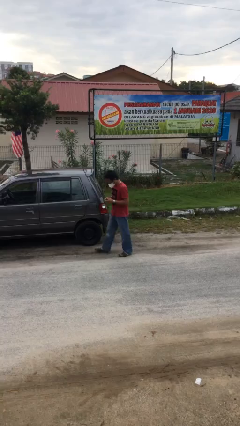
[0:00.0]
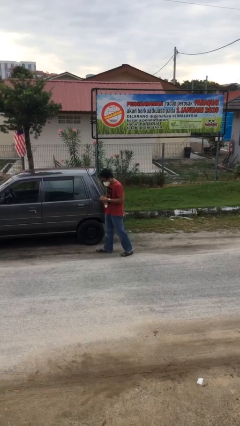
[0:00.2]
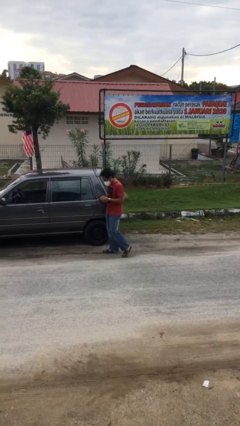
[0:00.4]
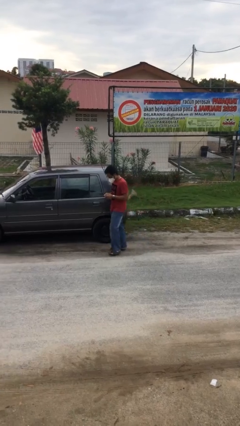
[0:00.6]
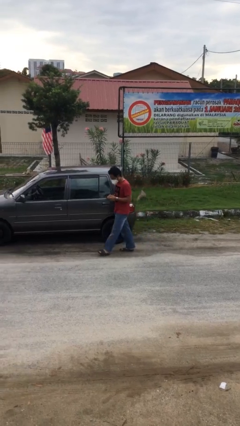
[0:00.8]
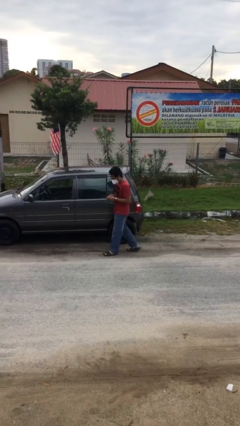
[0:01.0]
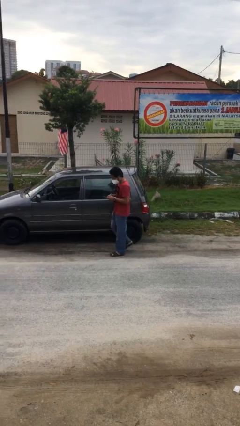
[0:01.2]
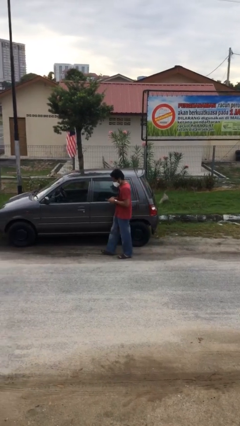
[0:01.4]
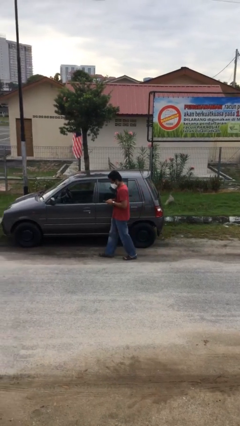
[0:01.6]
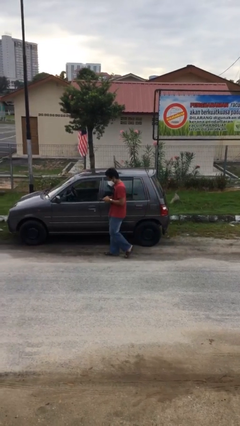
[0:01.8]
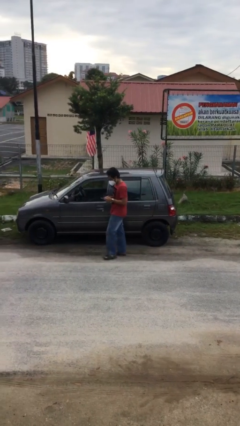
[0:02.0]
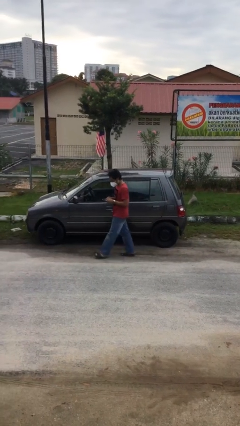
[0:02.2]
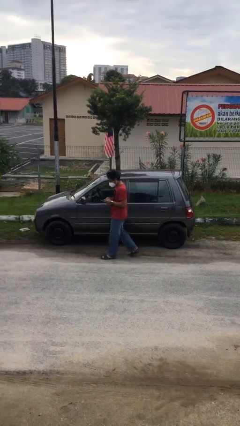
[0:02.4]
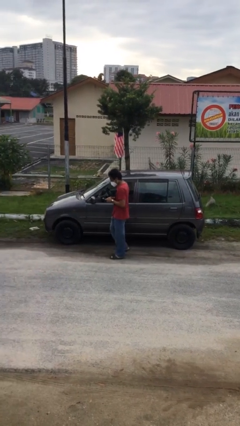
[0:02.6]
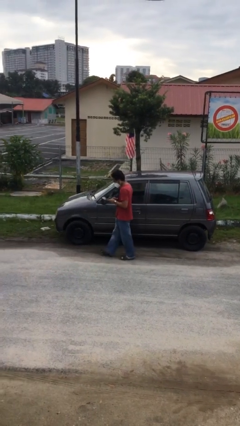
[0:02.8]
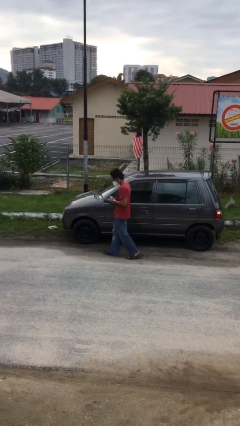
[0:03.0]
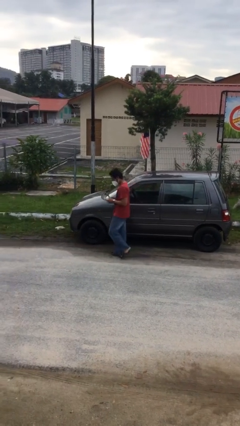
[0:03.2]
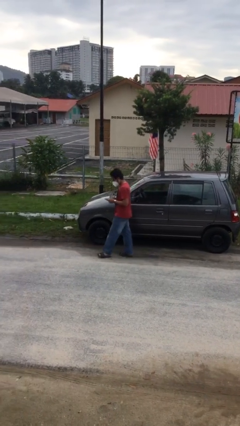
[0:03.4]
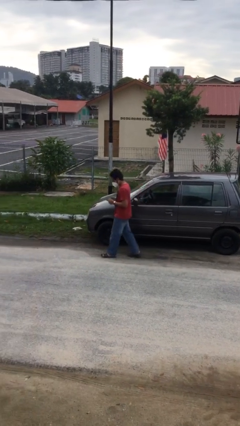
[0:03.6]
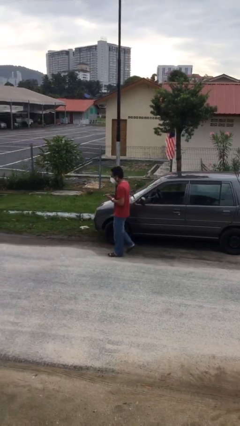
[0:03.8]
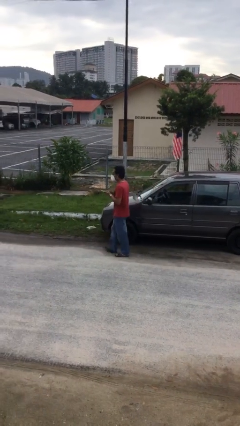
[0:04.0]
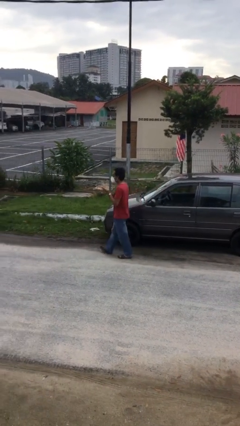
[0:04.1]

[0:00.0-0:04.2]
person texts on phone

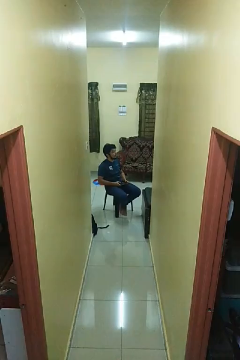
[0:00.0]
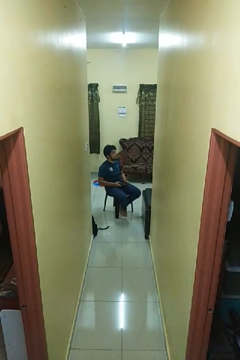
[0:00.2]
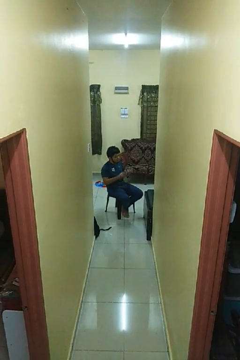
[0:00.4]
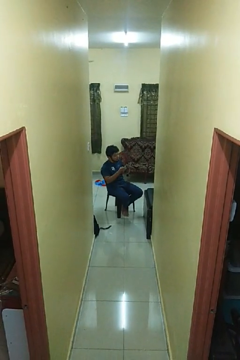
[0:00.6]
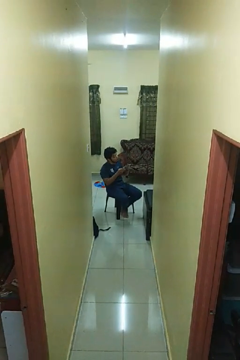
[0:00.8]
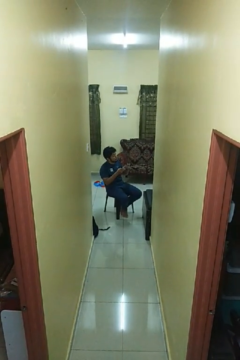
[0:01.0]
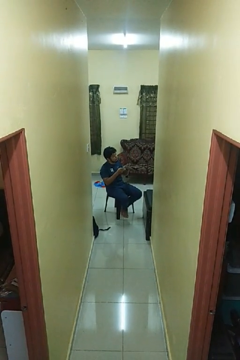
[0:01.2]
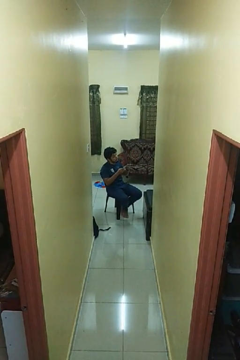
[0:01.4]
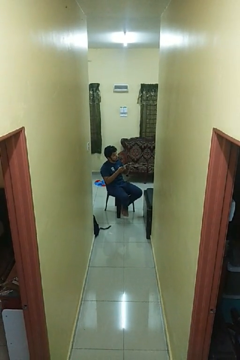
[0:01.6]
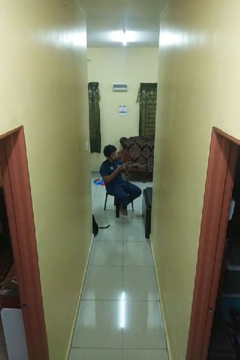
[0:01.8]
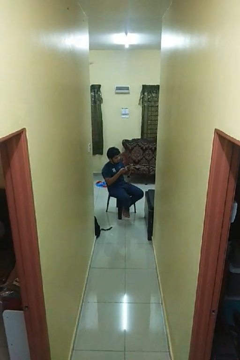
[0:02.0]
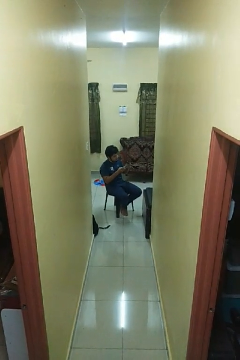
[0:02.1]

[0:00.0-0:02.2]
person interacts with handheld game

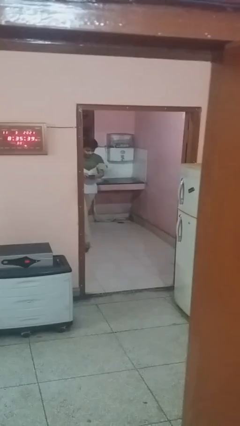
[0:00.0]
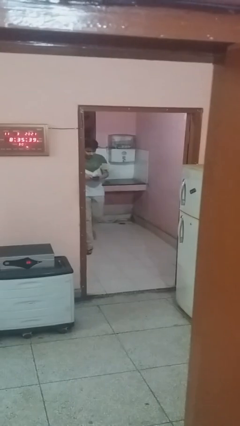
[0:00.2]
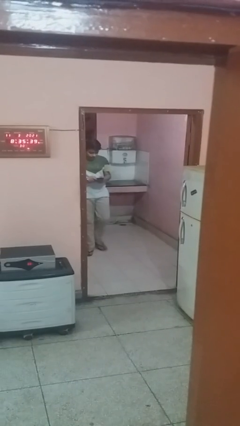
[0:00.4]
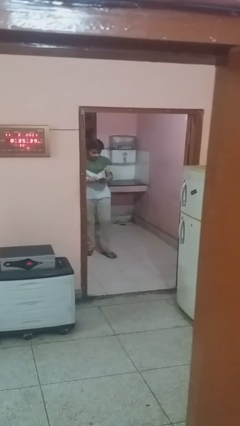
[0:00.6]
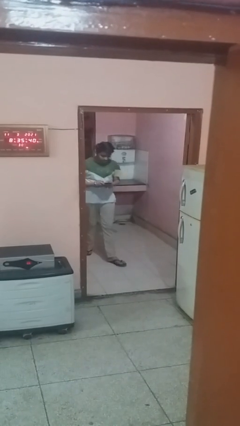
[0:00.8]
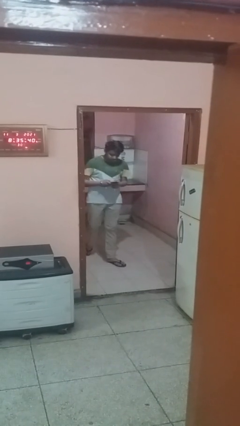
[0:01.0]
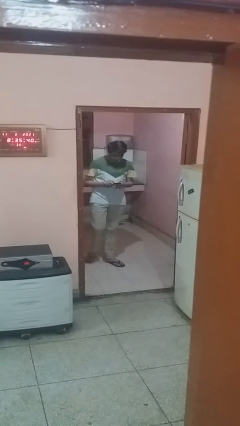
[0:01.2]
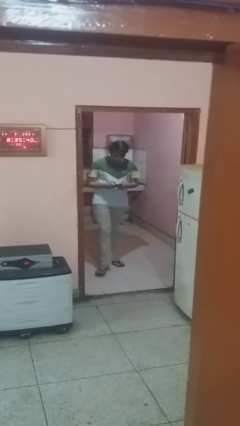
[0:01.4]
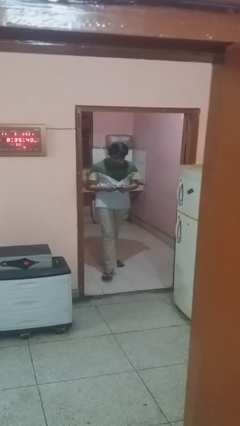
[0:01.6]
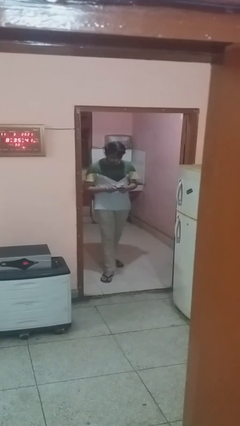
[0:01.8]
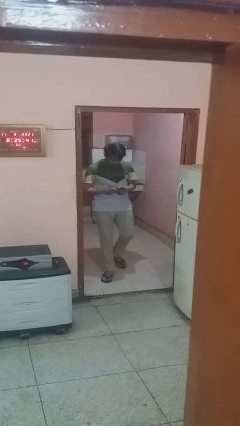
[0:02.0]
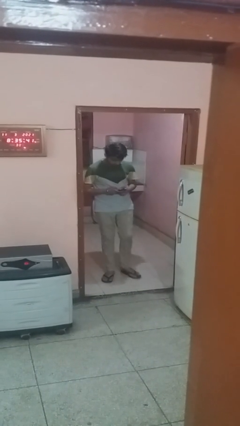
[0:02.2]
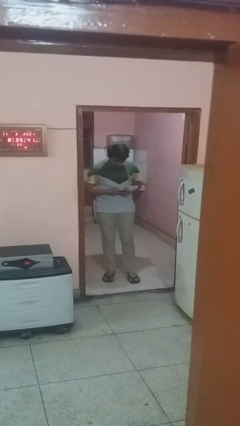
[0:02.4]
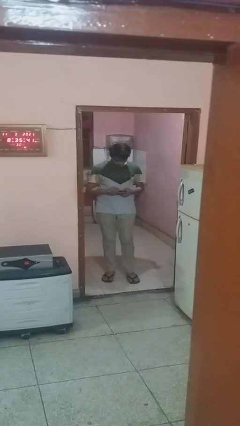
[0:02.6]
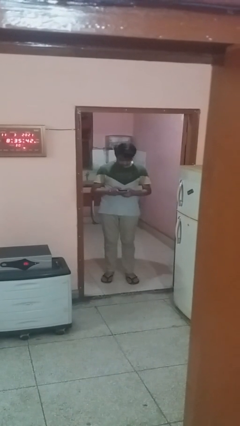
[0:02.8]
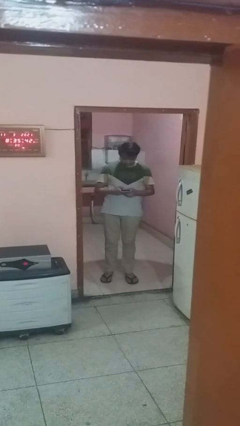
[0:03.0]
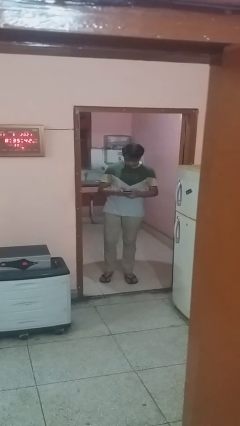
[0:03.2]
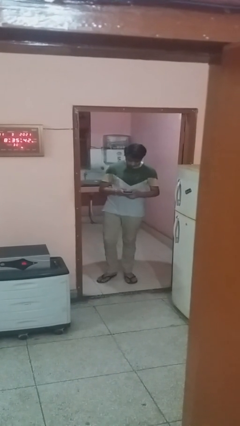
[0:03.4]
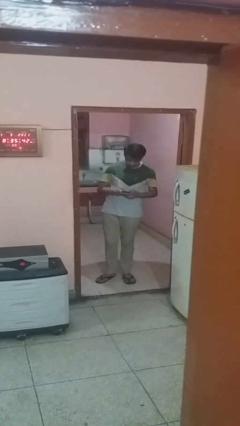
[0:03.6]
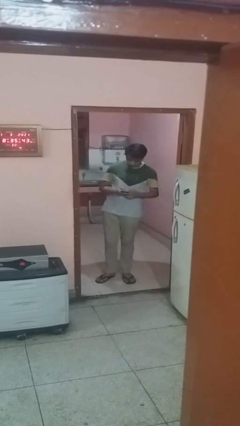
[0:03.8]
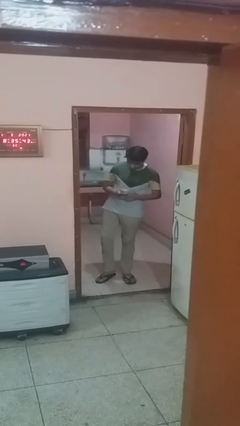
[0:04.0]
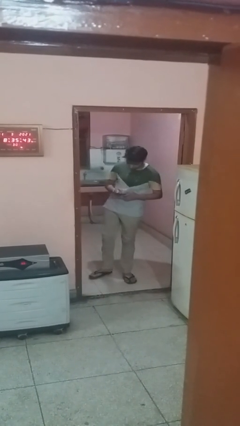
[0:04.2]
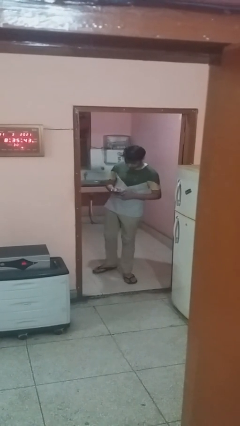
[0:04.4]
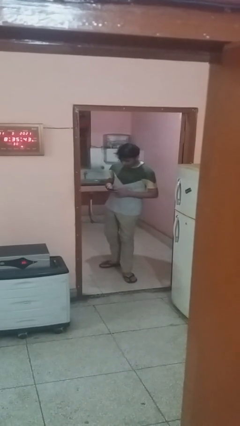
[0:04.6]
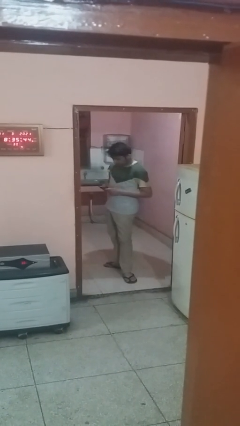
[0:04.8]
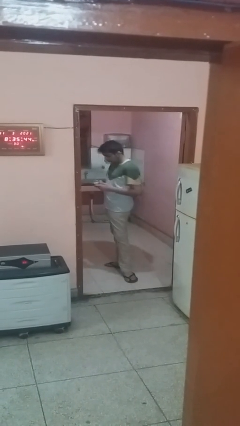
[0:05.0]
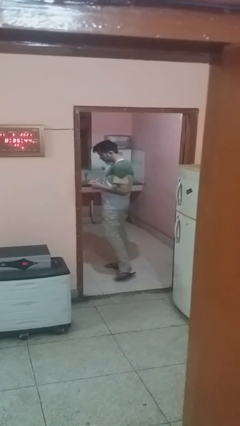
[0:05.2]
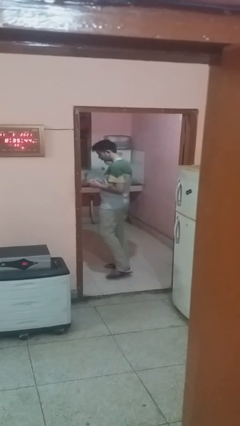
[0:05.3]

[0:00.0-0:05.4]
person enters scene through structure

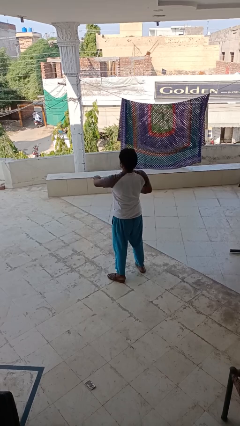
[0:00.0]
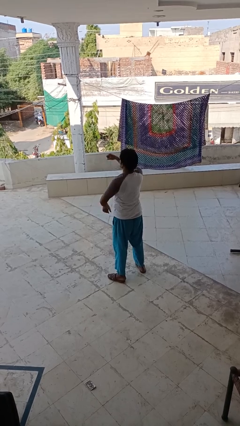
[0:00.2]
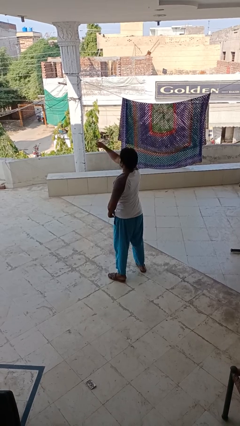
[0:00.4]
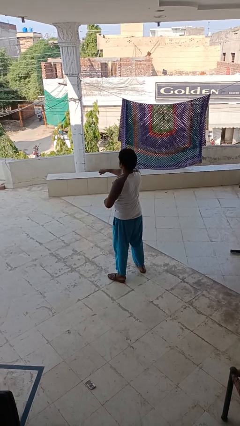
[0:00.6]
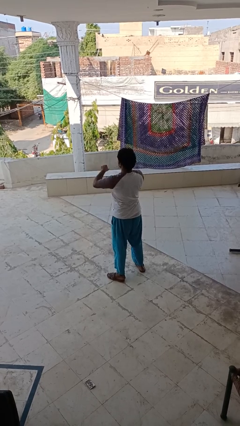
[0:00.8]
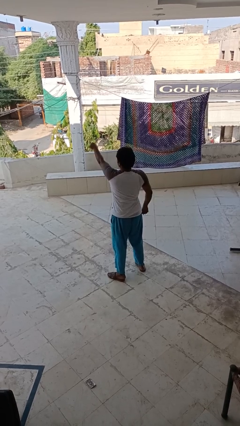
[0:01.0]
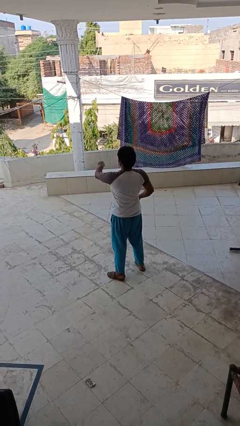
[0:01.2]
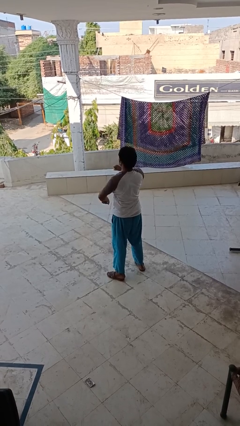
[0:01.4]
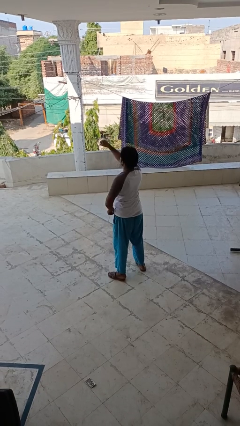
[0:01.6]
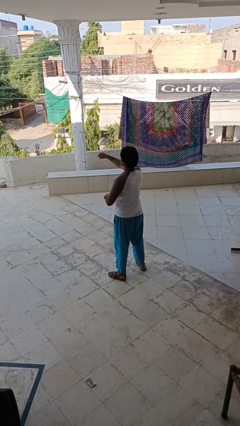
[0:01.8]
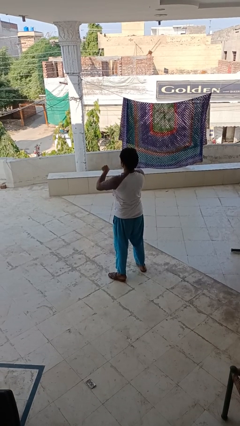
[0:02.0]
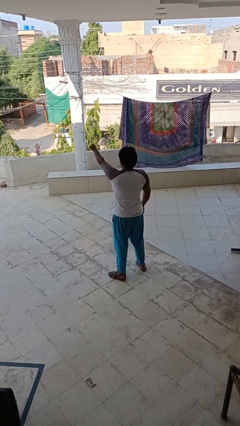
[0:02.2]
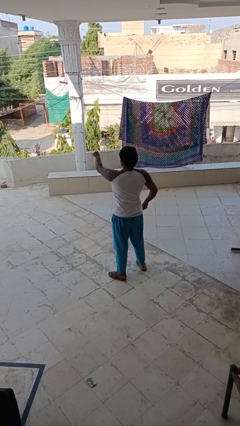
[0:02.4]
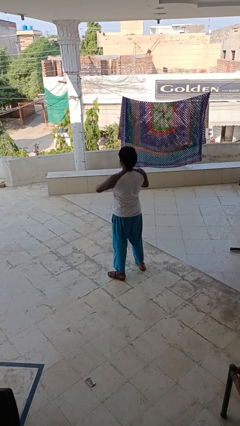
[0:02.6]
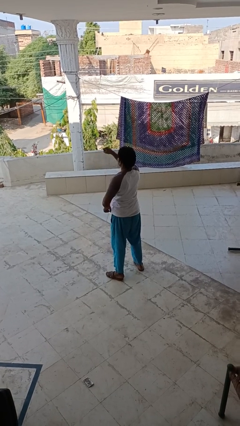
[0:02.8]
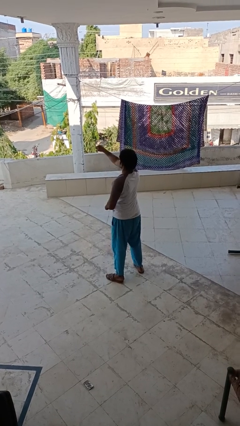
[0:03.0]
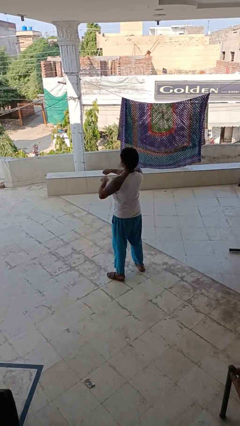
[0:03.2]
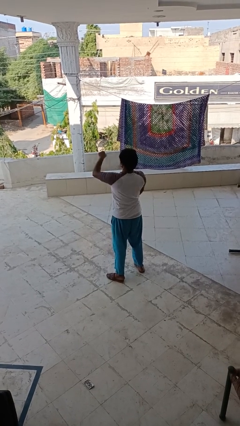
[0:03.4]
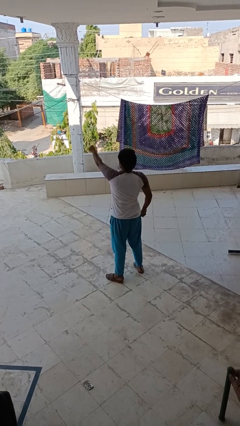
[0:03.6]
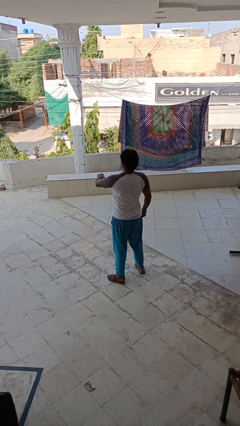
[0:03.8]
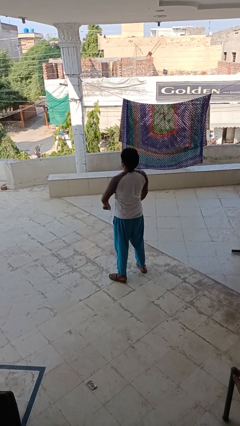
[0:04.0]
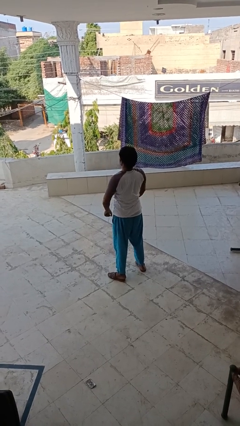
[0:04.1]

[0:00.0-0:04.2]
person punches

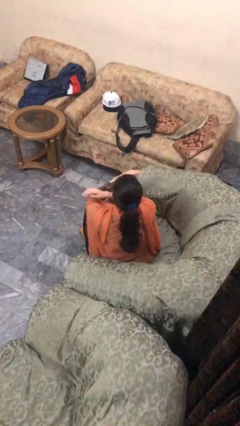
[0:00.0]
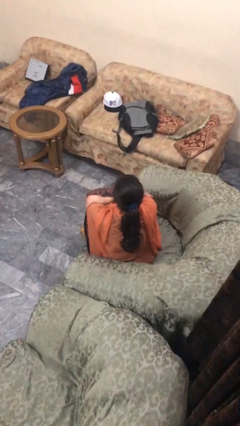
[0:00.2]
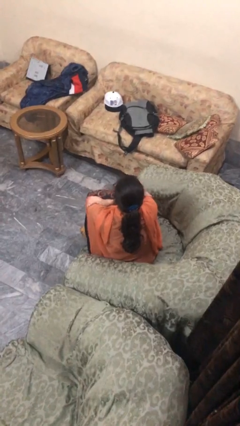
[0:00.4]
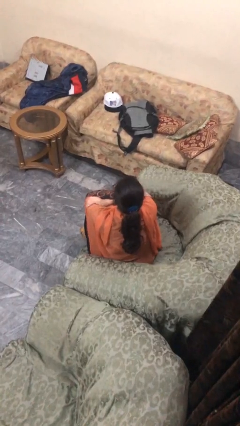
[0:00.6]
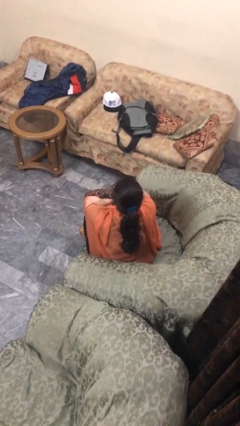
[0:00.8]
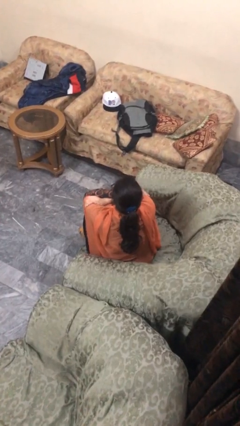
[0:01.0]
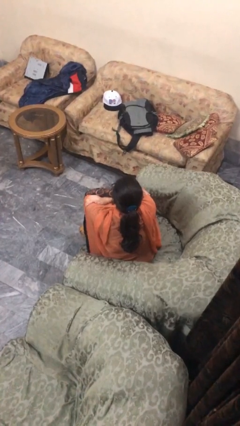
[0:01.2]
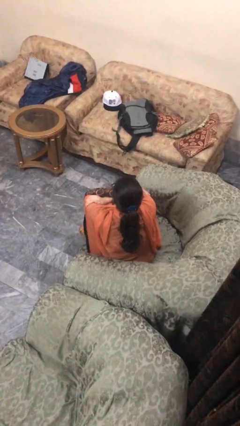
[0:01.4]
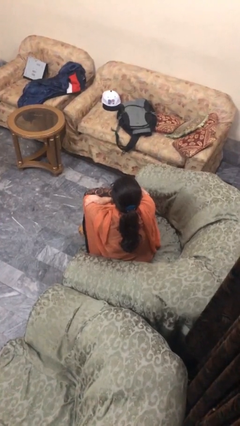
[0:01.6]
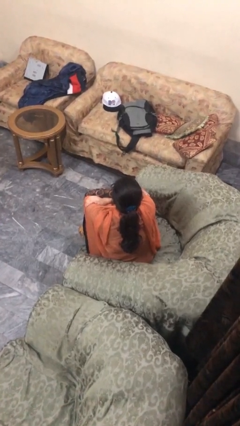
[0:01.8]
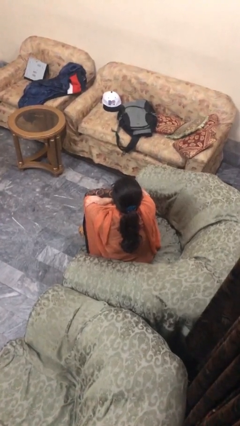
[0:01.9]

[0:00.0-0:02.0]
person crosses arms
